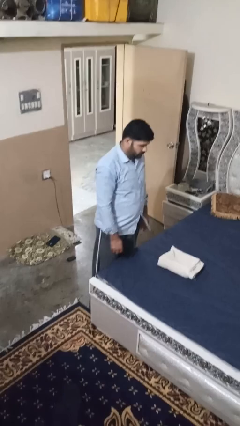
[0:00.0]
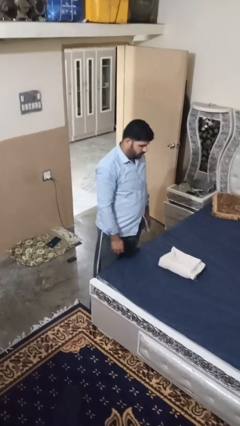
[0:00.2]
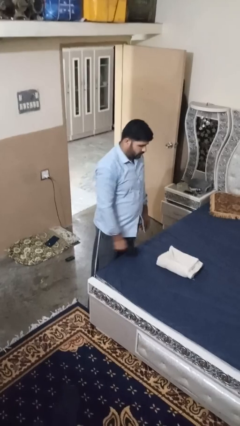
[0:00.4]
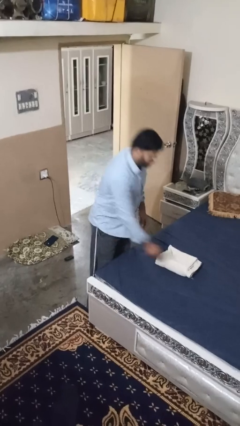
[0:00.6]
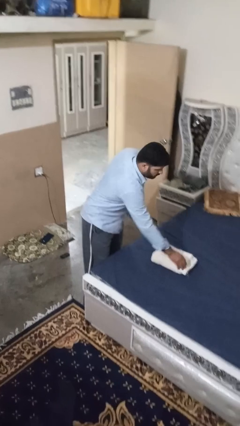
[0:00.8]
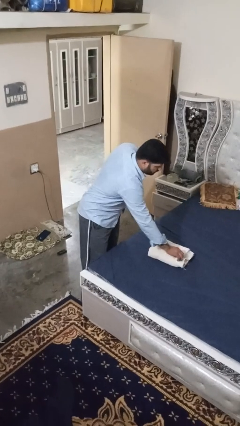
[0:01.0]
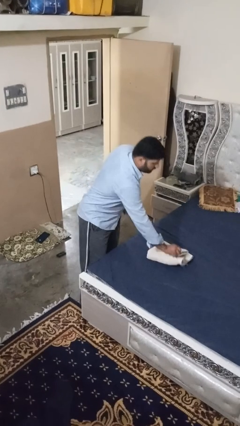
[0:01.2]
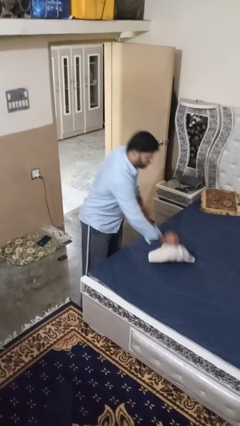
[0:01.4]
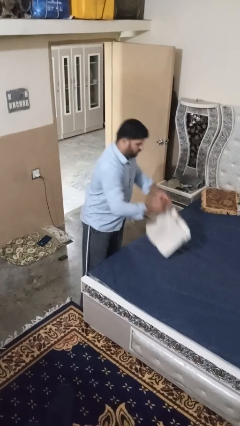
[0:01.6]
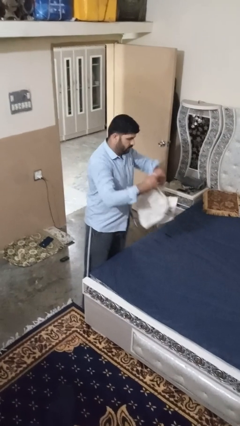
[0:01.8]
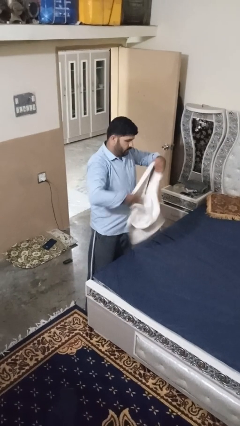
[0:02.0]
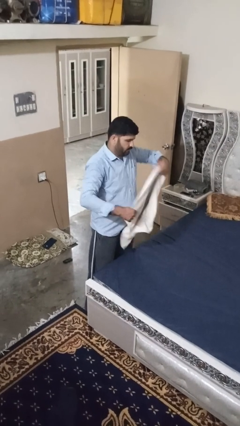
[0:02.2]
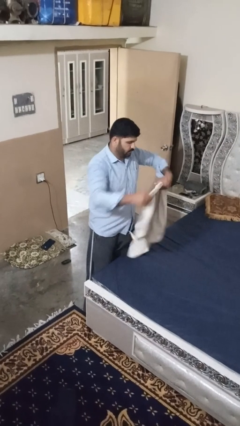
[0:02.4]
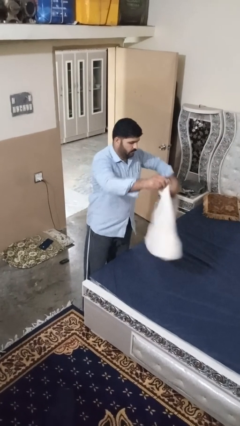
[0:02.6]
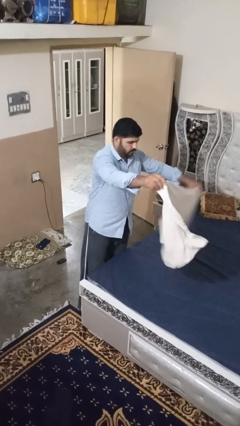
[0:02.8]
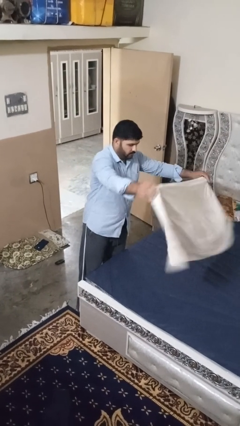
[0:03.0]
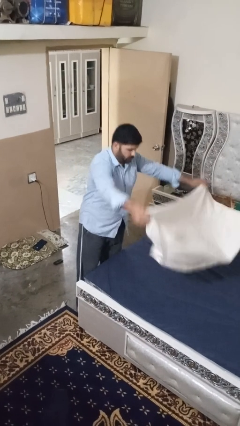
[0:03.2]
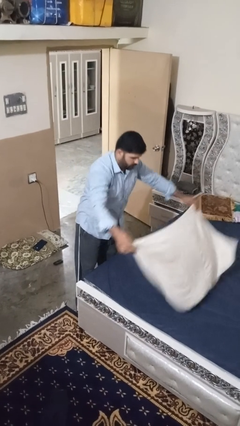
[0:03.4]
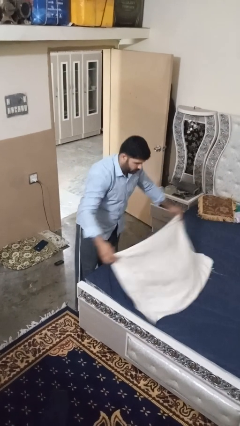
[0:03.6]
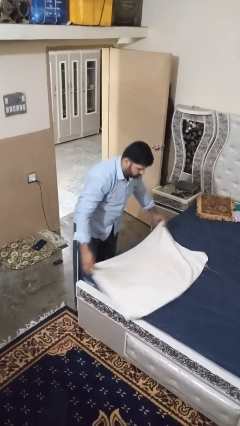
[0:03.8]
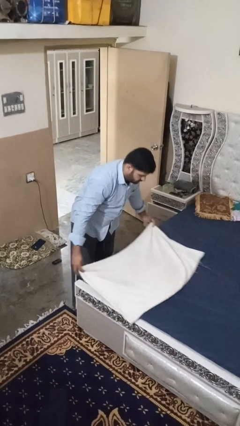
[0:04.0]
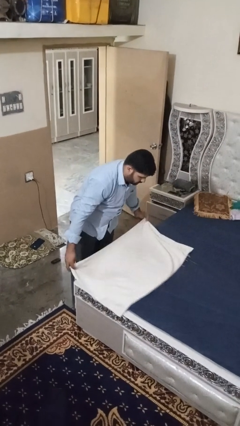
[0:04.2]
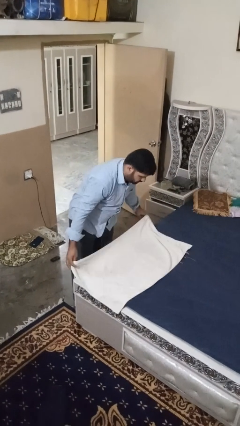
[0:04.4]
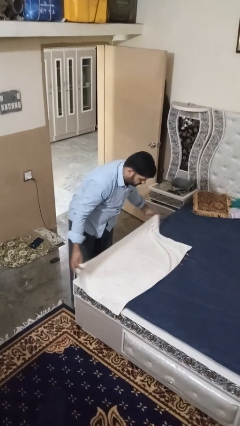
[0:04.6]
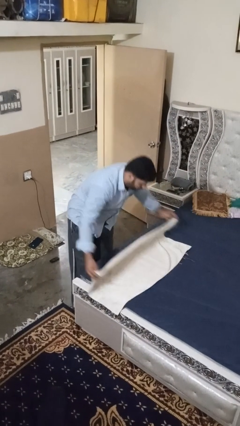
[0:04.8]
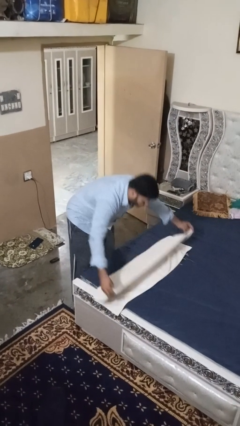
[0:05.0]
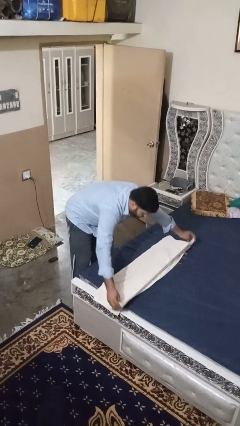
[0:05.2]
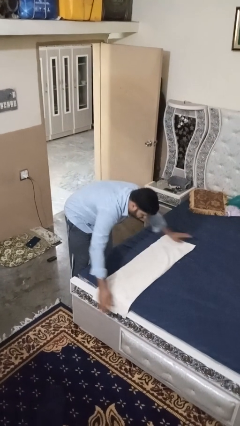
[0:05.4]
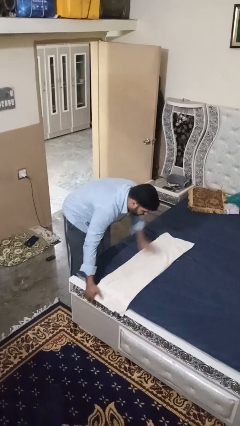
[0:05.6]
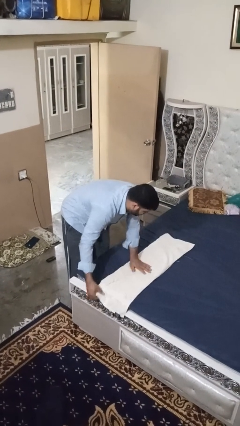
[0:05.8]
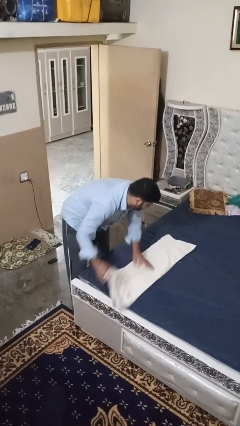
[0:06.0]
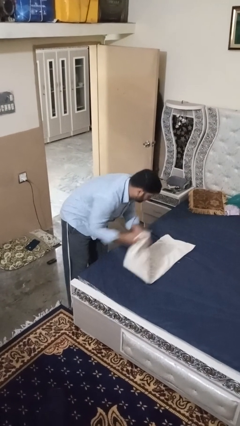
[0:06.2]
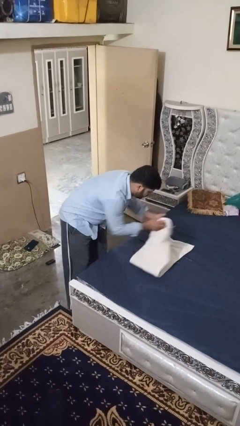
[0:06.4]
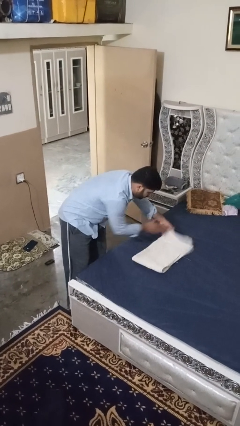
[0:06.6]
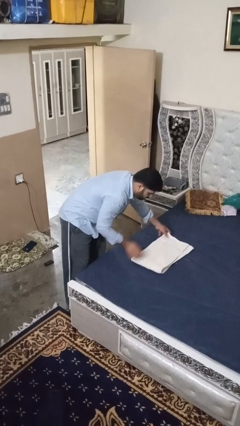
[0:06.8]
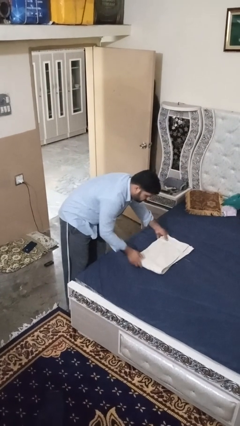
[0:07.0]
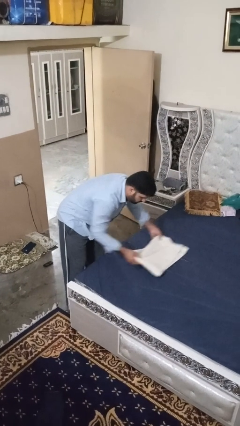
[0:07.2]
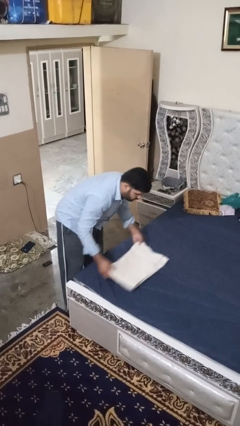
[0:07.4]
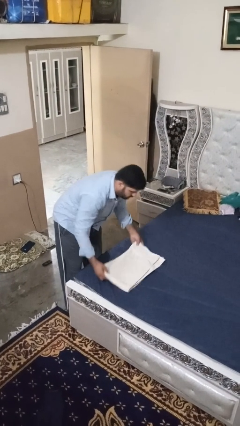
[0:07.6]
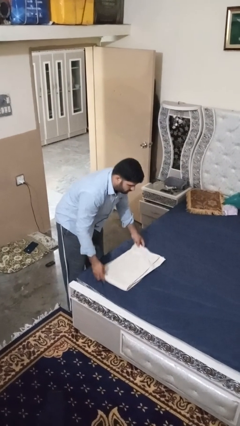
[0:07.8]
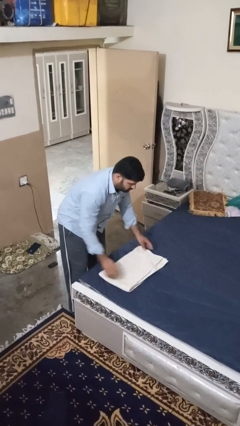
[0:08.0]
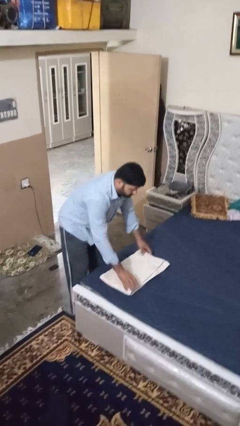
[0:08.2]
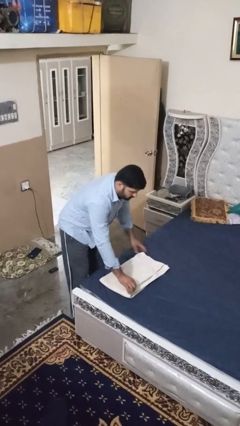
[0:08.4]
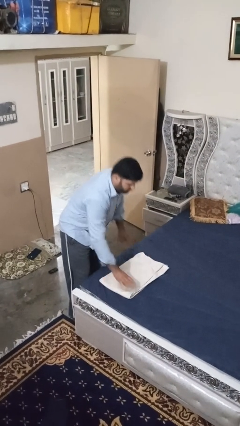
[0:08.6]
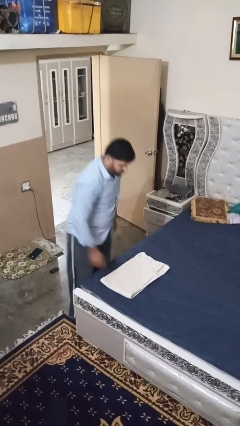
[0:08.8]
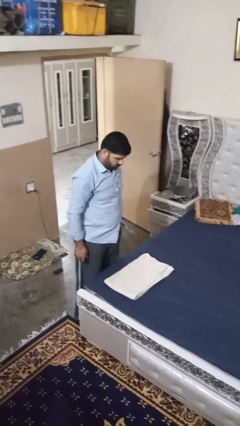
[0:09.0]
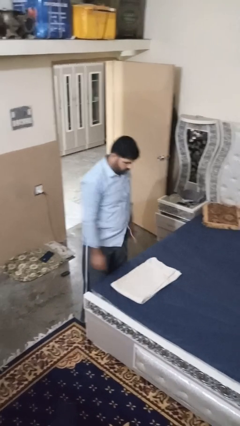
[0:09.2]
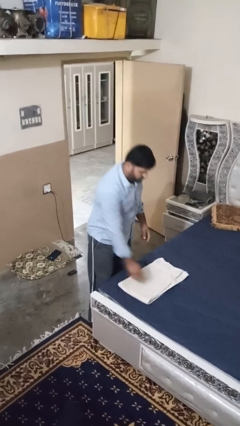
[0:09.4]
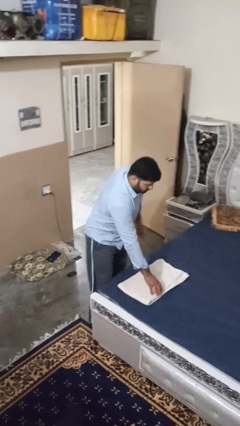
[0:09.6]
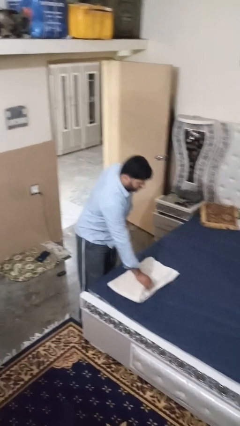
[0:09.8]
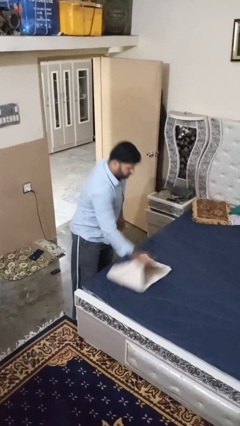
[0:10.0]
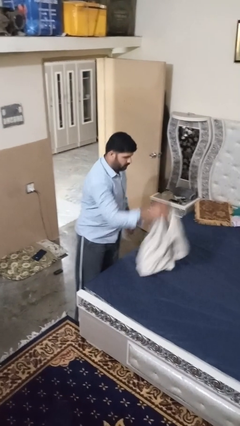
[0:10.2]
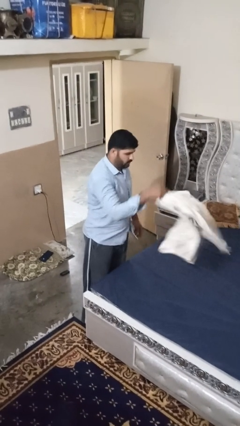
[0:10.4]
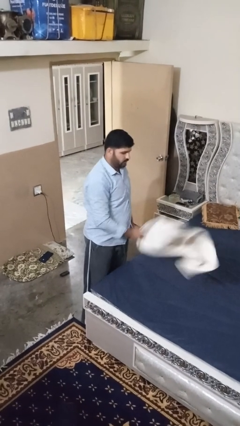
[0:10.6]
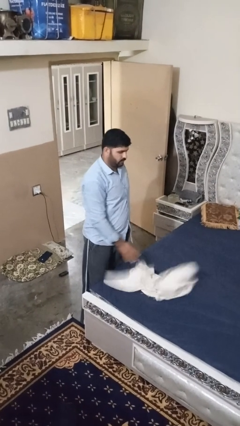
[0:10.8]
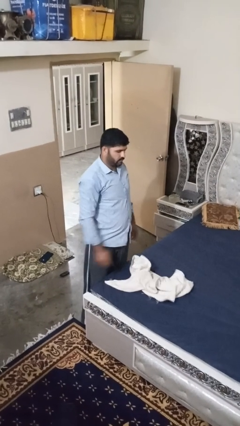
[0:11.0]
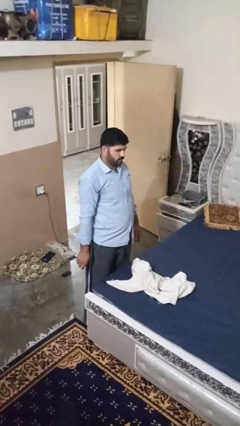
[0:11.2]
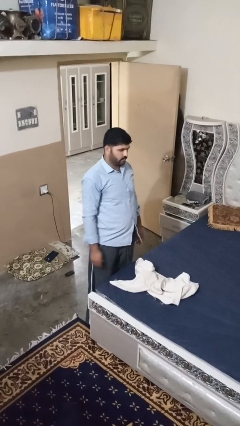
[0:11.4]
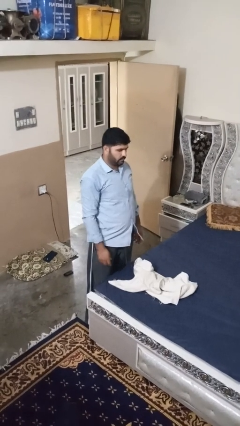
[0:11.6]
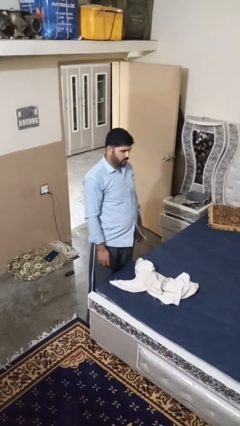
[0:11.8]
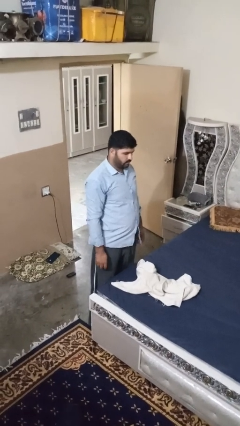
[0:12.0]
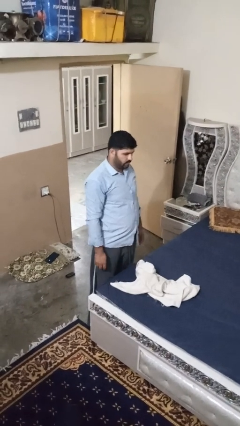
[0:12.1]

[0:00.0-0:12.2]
person folds towel

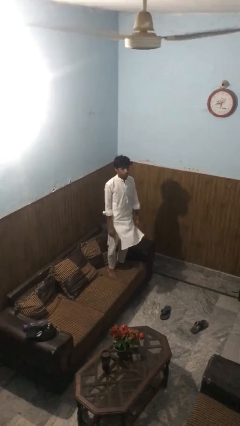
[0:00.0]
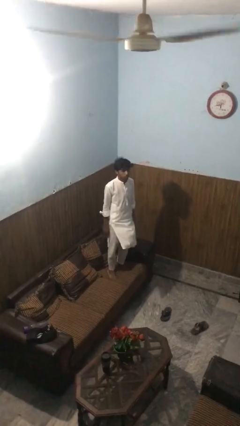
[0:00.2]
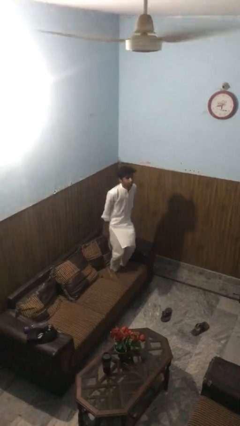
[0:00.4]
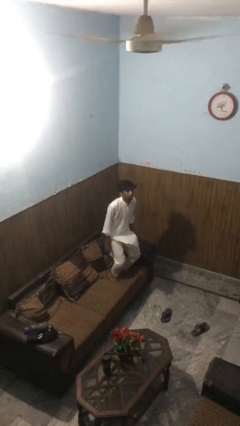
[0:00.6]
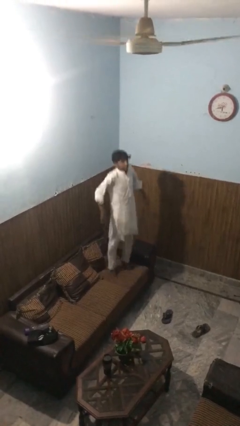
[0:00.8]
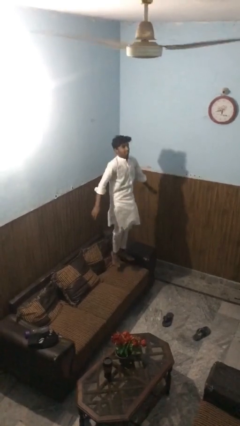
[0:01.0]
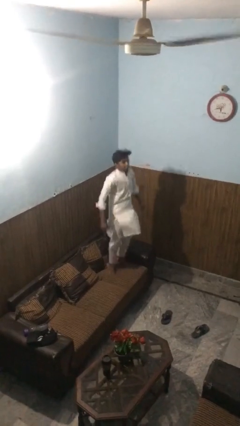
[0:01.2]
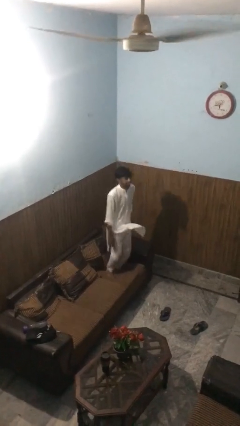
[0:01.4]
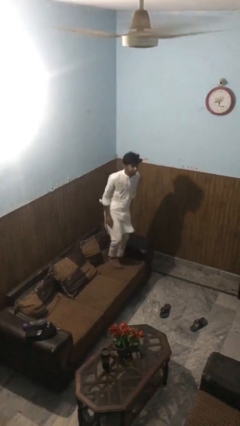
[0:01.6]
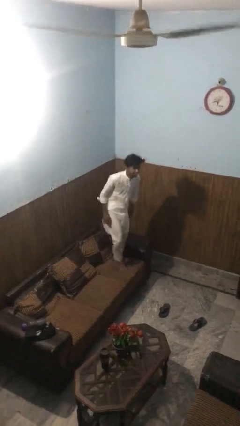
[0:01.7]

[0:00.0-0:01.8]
person jumps on couch

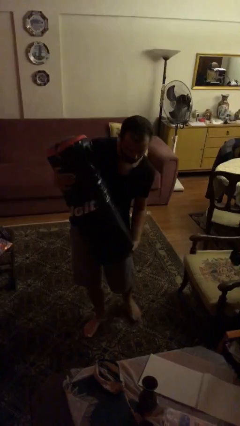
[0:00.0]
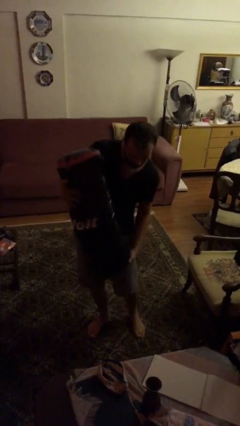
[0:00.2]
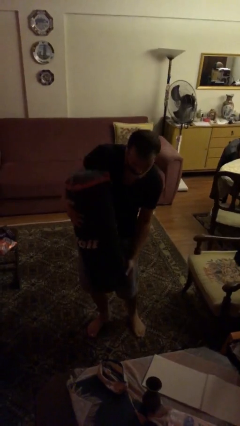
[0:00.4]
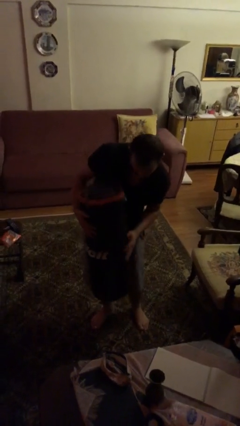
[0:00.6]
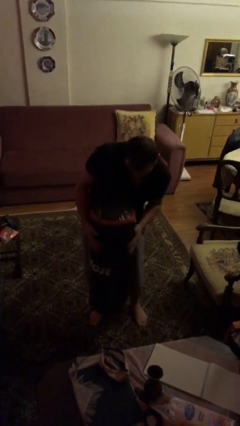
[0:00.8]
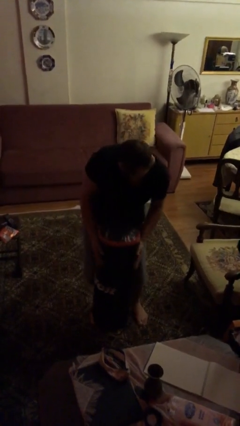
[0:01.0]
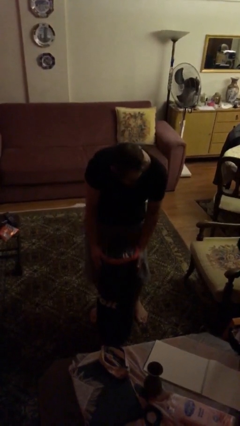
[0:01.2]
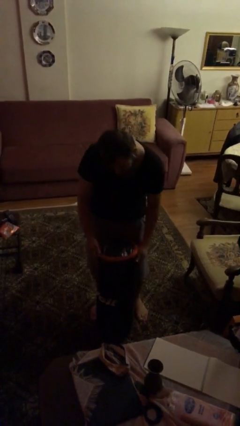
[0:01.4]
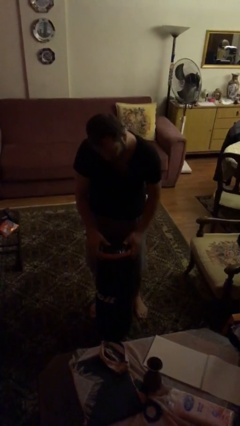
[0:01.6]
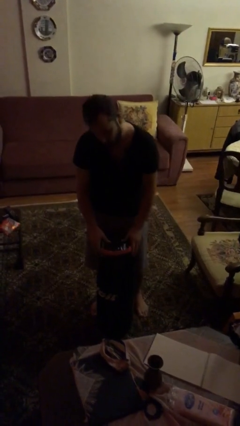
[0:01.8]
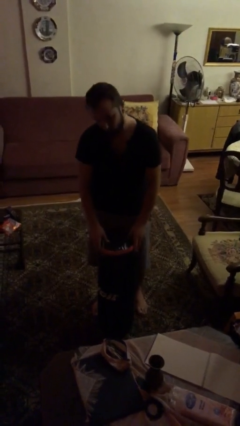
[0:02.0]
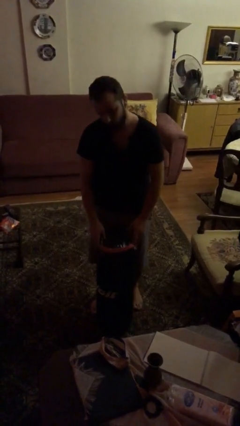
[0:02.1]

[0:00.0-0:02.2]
person puts down object on floor

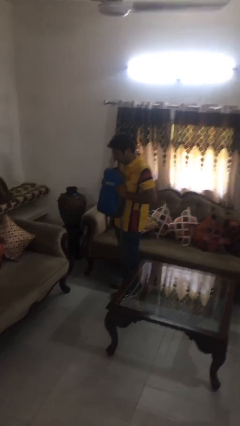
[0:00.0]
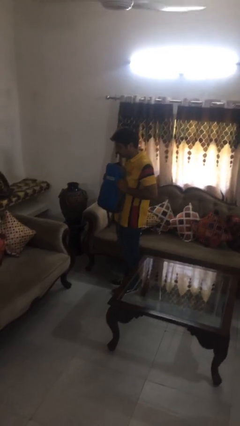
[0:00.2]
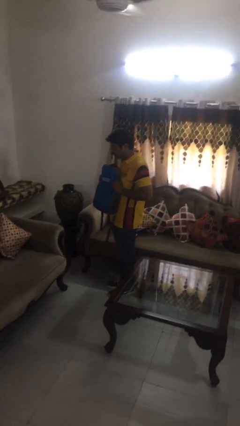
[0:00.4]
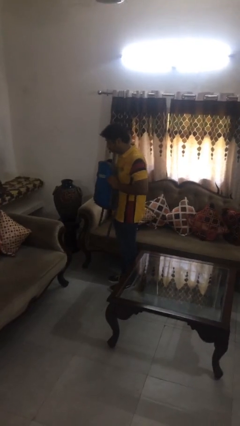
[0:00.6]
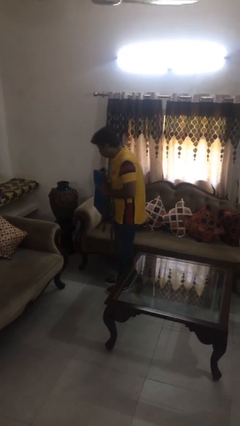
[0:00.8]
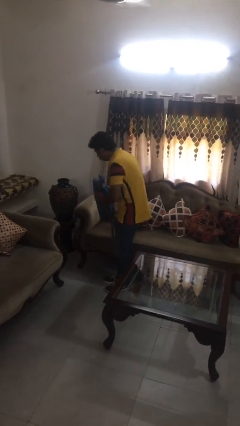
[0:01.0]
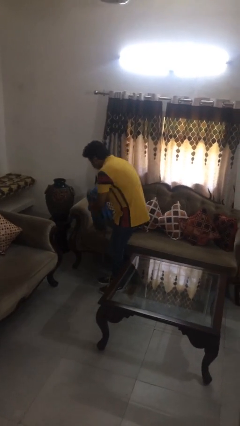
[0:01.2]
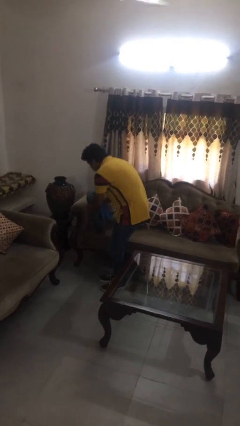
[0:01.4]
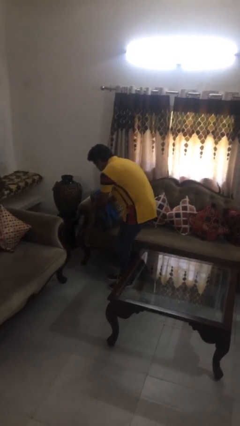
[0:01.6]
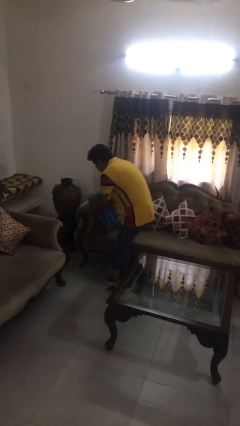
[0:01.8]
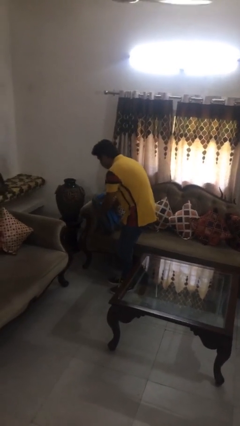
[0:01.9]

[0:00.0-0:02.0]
person puts down object on couch
